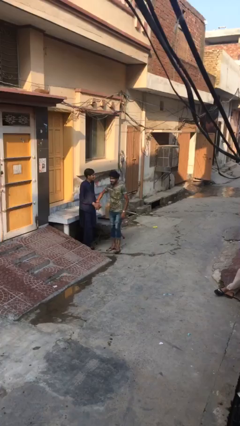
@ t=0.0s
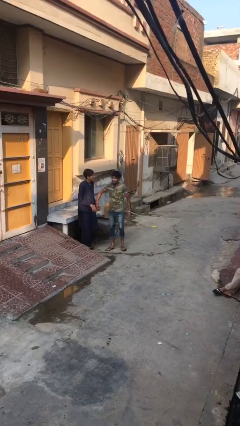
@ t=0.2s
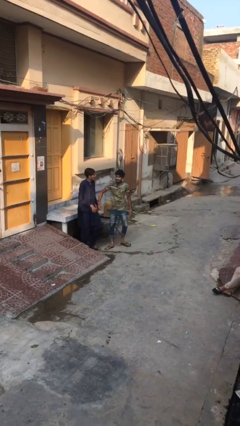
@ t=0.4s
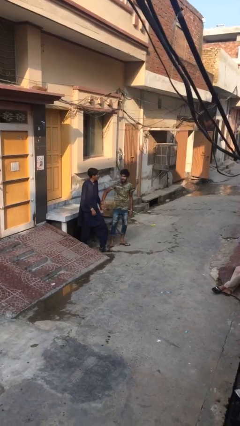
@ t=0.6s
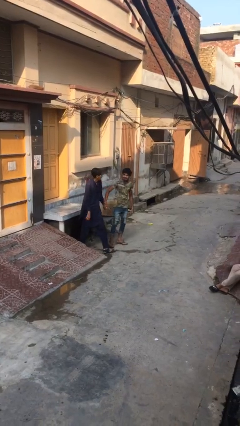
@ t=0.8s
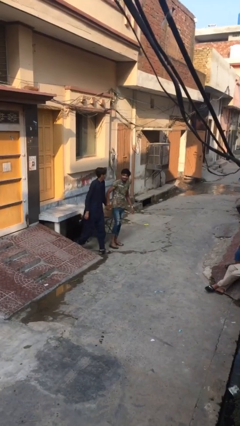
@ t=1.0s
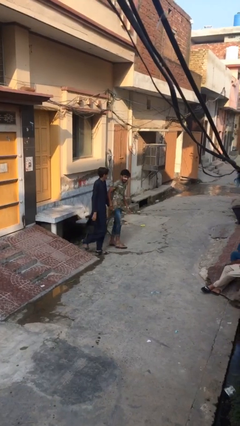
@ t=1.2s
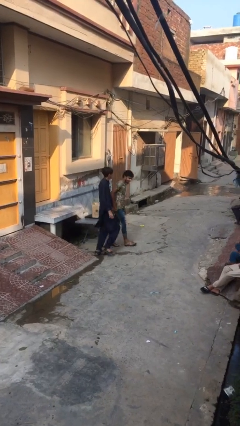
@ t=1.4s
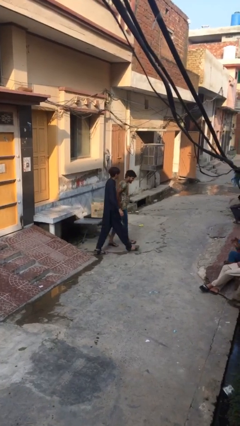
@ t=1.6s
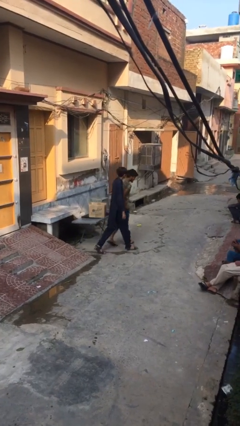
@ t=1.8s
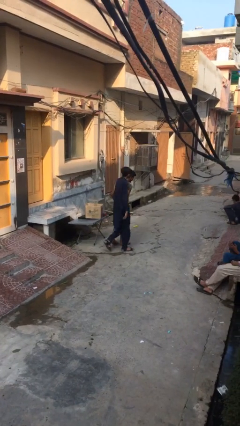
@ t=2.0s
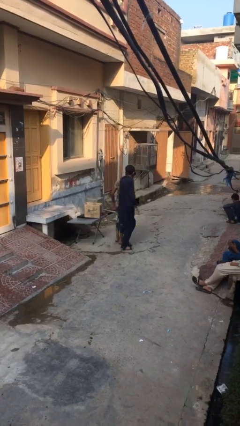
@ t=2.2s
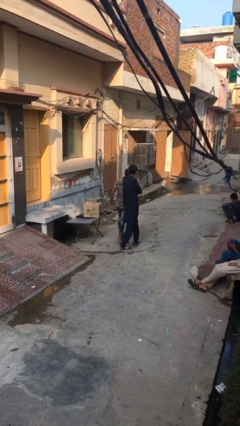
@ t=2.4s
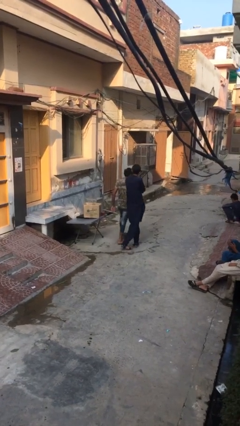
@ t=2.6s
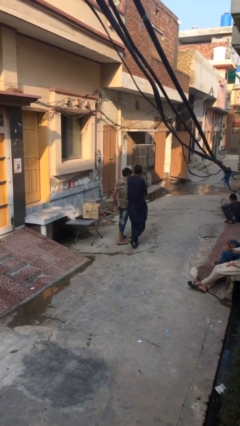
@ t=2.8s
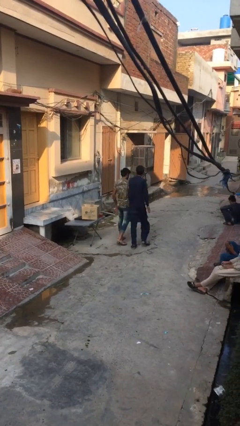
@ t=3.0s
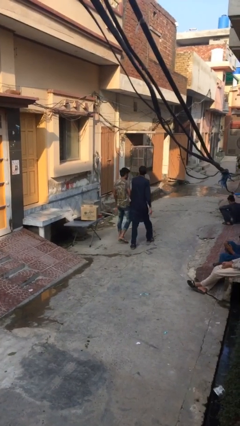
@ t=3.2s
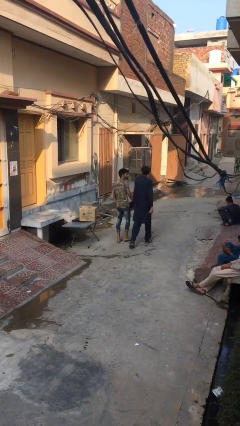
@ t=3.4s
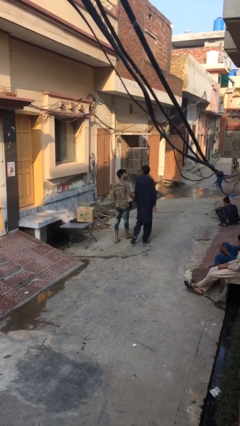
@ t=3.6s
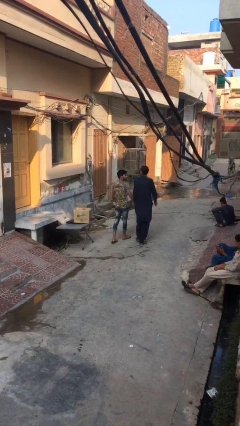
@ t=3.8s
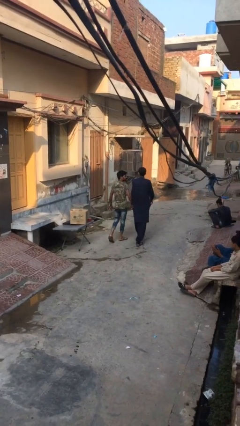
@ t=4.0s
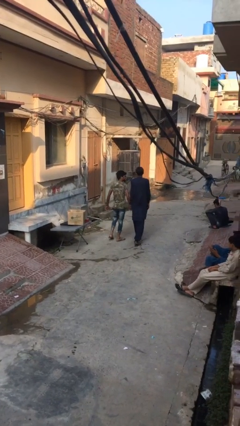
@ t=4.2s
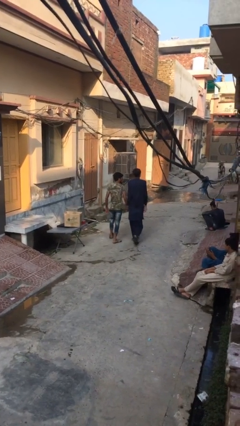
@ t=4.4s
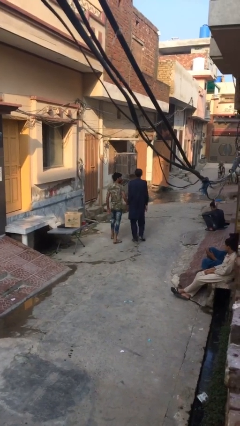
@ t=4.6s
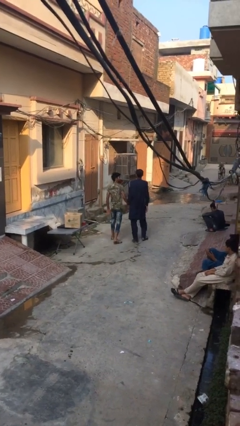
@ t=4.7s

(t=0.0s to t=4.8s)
person talks to person

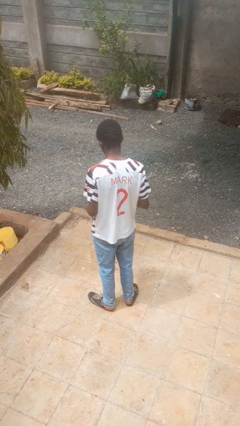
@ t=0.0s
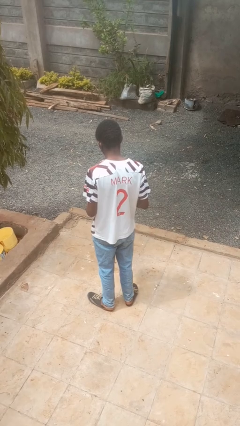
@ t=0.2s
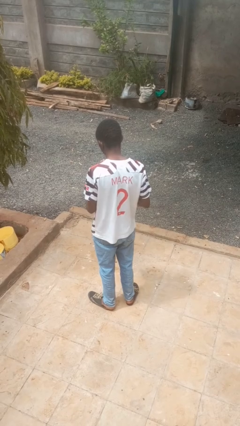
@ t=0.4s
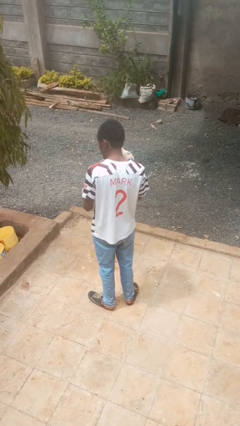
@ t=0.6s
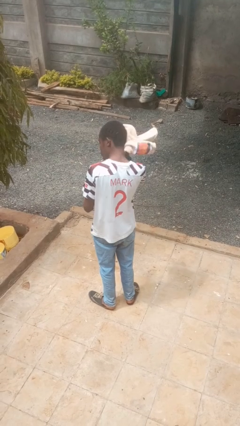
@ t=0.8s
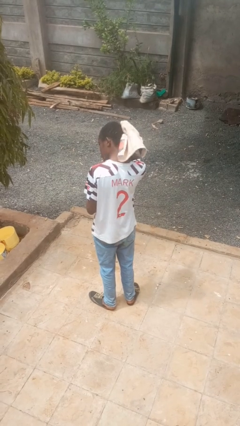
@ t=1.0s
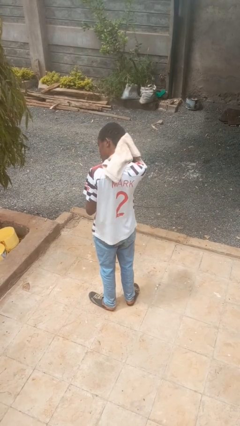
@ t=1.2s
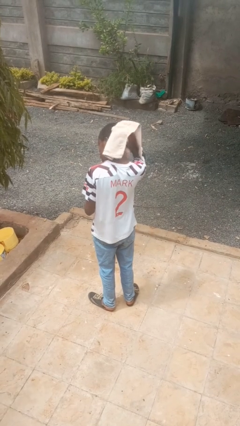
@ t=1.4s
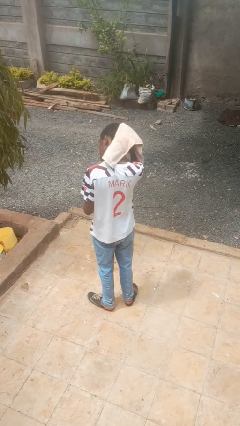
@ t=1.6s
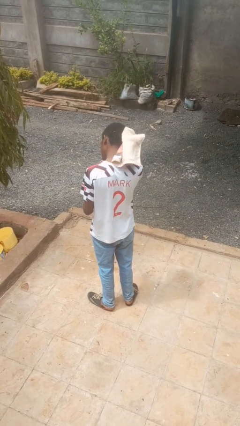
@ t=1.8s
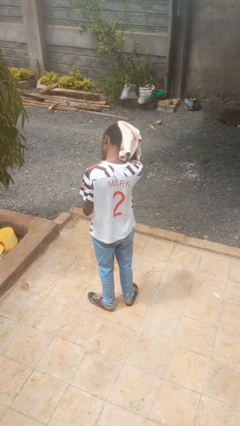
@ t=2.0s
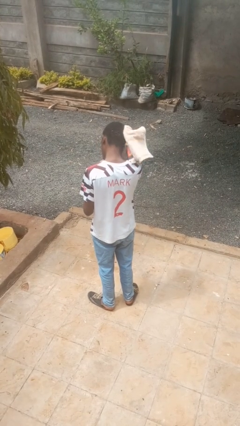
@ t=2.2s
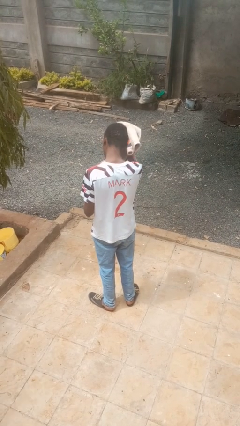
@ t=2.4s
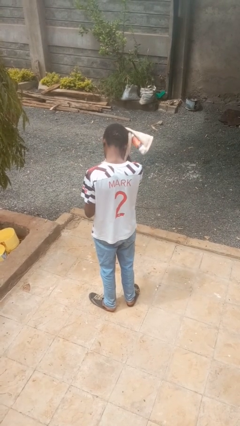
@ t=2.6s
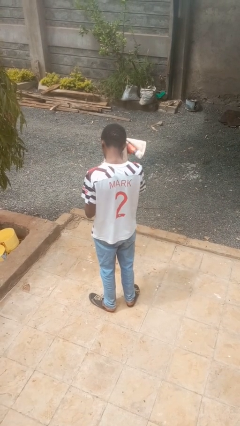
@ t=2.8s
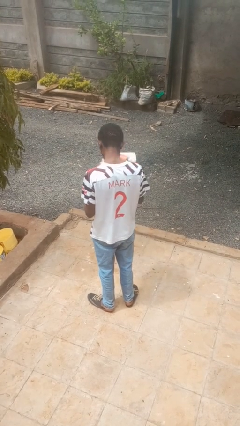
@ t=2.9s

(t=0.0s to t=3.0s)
person dries hair with towel

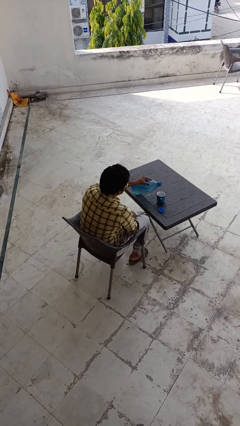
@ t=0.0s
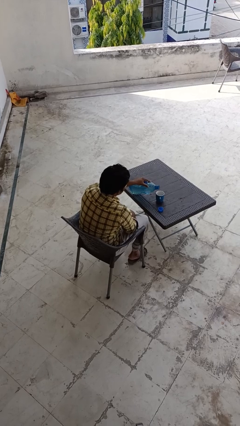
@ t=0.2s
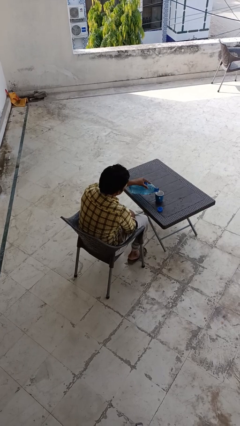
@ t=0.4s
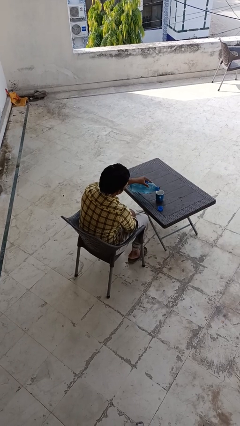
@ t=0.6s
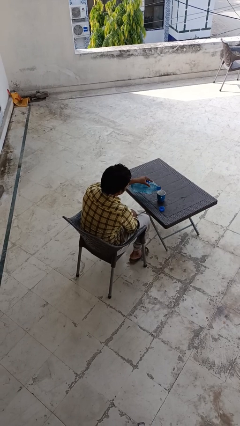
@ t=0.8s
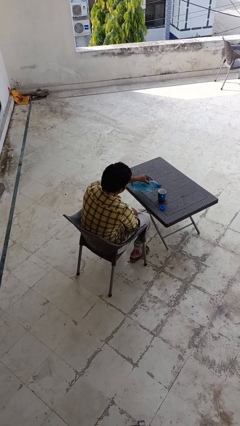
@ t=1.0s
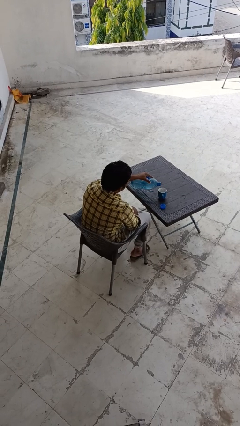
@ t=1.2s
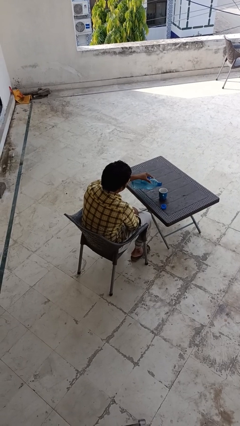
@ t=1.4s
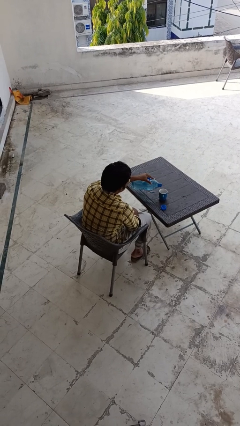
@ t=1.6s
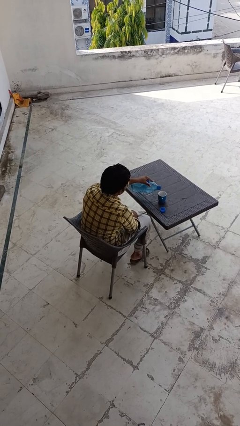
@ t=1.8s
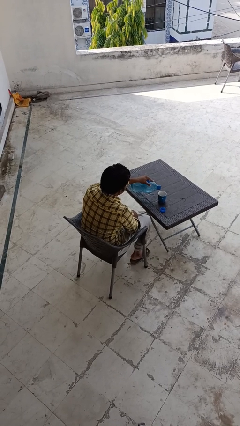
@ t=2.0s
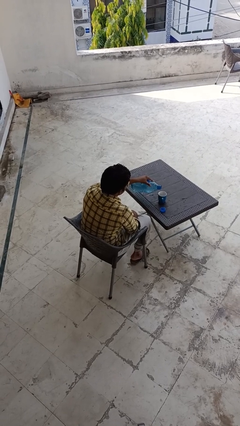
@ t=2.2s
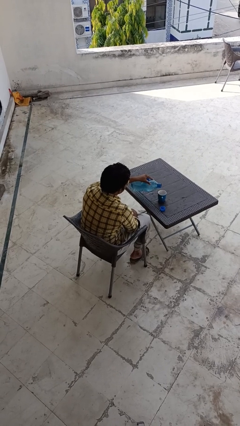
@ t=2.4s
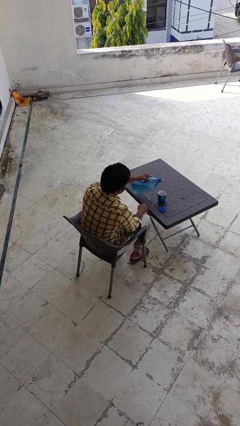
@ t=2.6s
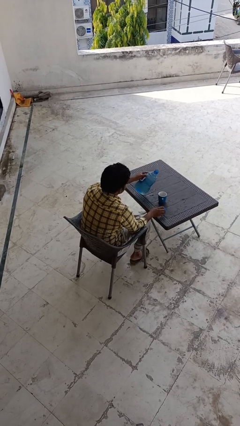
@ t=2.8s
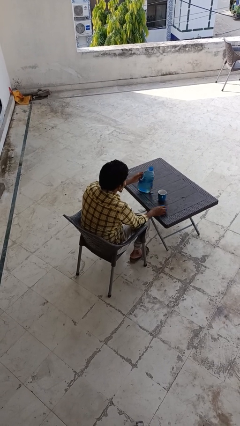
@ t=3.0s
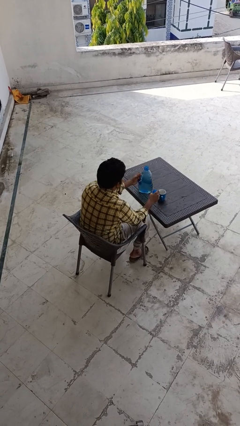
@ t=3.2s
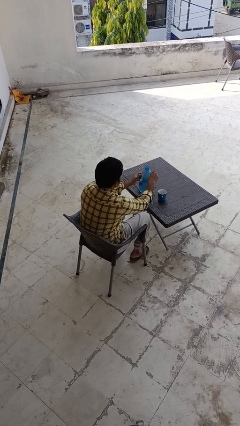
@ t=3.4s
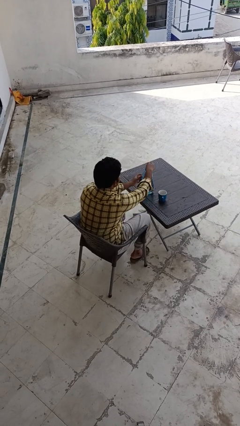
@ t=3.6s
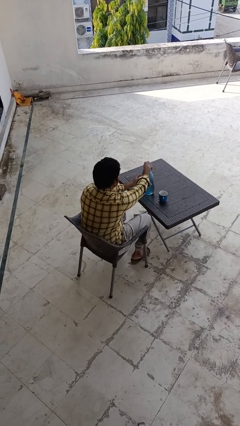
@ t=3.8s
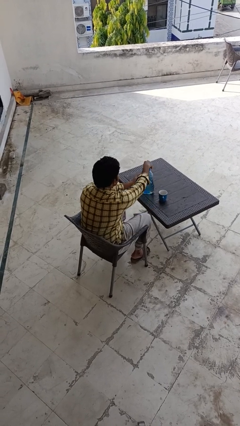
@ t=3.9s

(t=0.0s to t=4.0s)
person pours liquid into cup

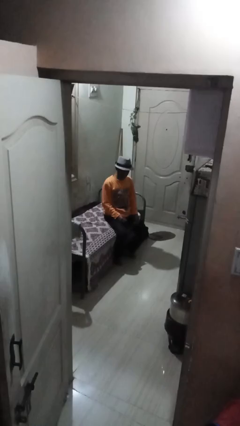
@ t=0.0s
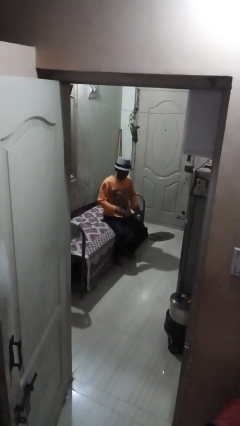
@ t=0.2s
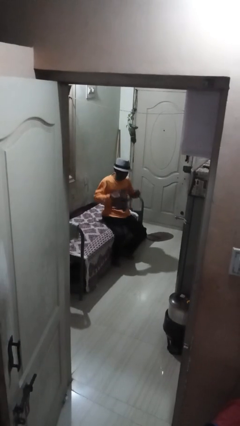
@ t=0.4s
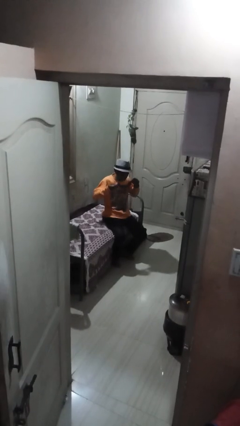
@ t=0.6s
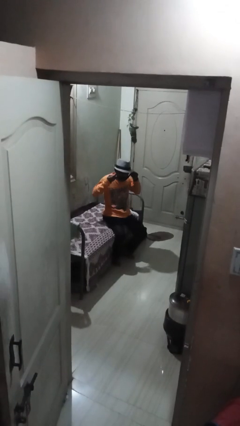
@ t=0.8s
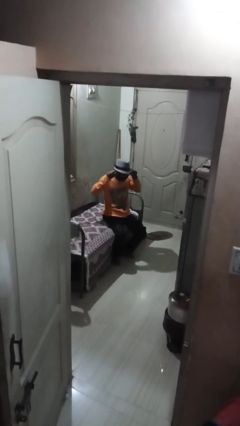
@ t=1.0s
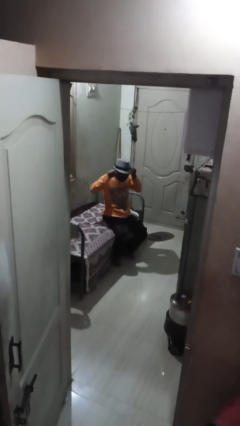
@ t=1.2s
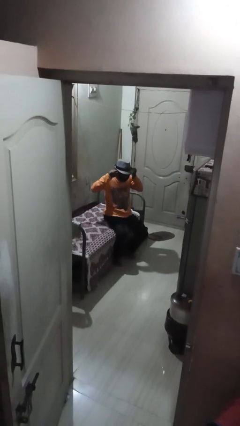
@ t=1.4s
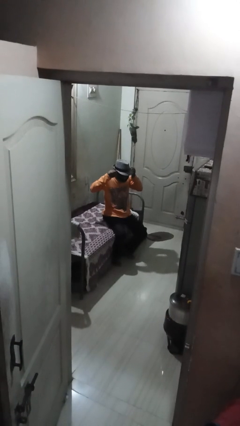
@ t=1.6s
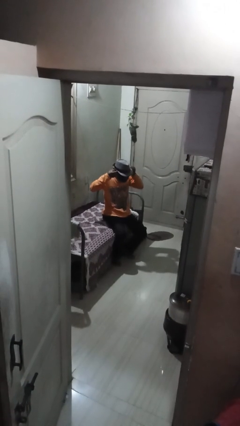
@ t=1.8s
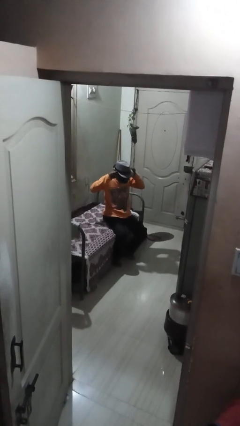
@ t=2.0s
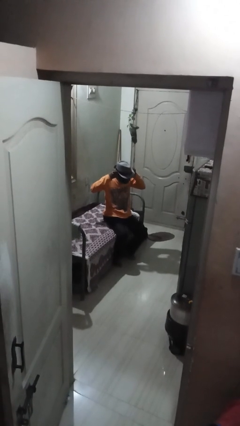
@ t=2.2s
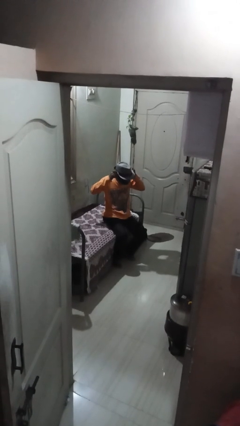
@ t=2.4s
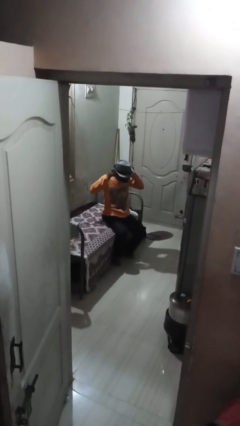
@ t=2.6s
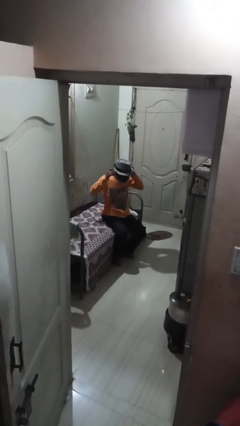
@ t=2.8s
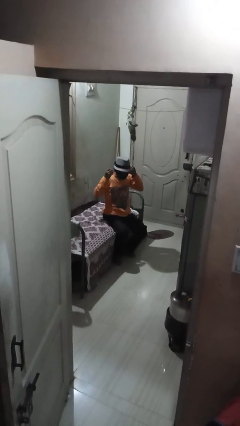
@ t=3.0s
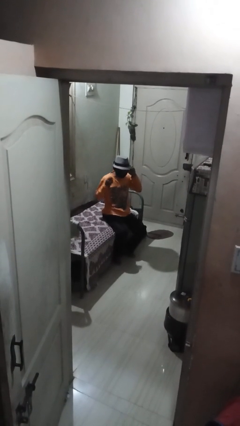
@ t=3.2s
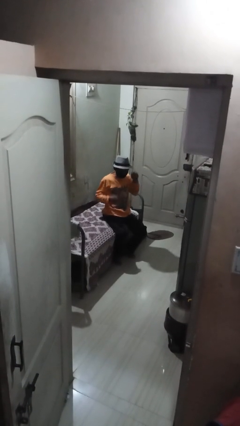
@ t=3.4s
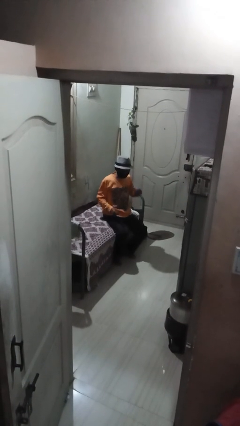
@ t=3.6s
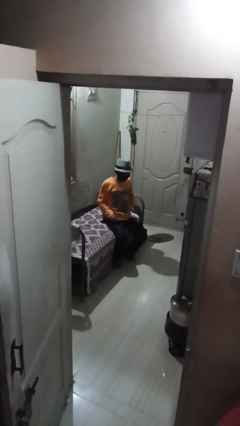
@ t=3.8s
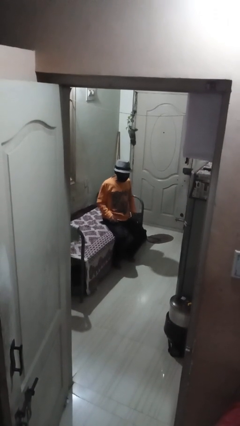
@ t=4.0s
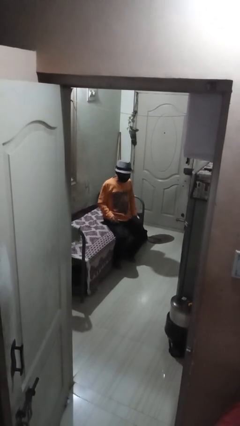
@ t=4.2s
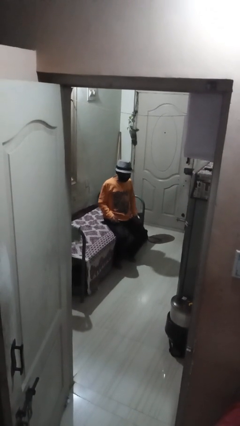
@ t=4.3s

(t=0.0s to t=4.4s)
person puts on facemask

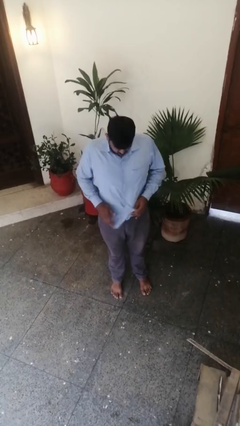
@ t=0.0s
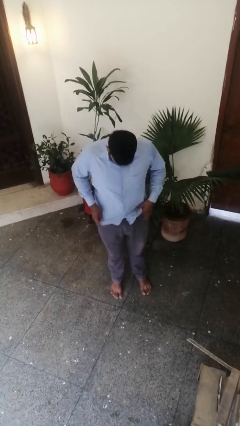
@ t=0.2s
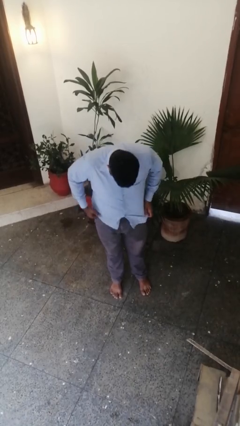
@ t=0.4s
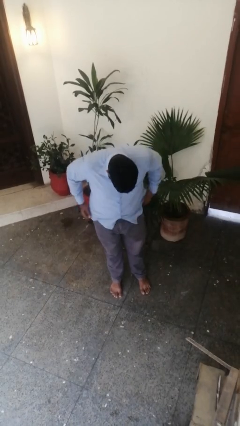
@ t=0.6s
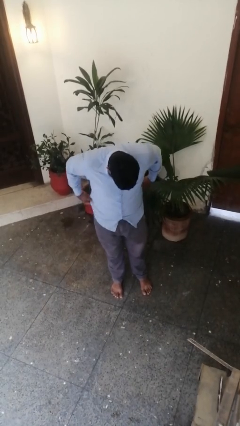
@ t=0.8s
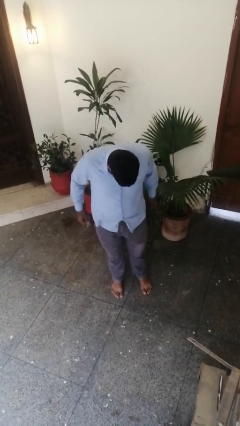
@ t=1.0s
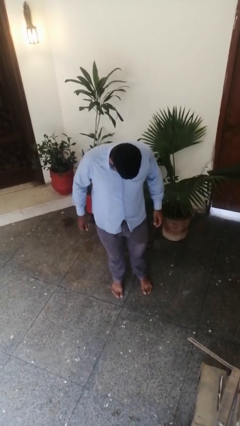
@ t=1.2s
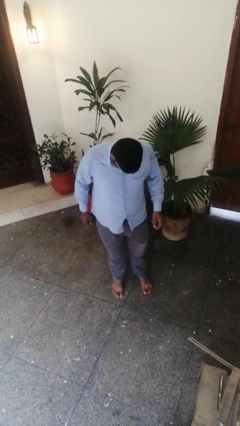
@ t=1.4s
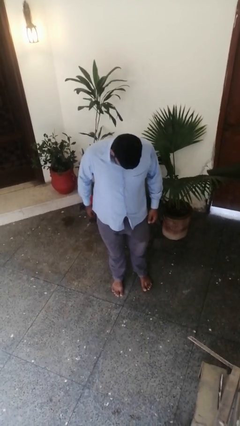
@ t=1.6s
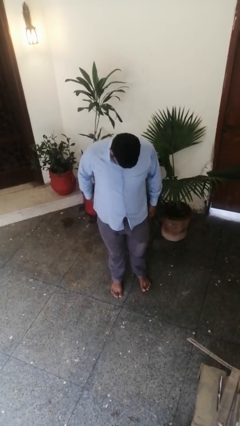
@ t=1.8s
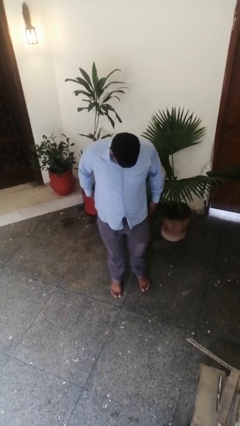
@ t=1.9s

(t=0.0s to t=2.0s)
person untucks shirt
